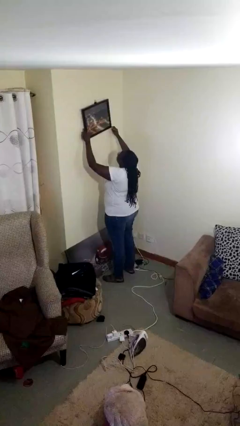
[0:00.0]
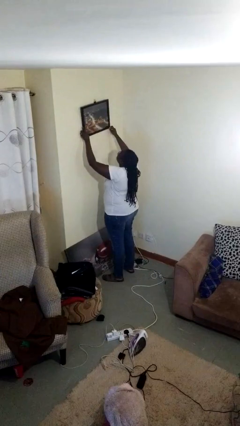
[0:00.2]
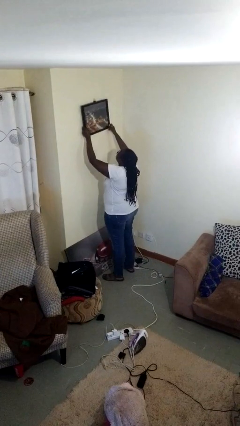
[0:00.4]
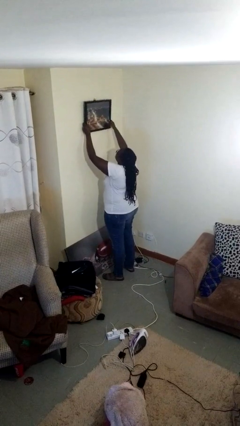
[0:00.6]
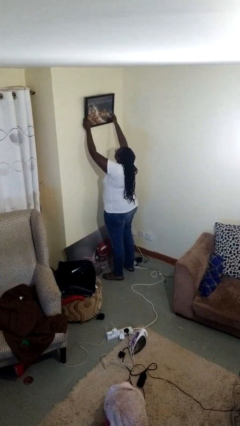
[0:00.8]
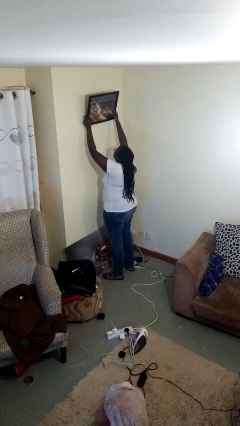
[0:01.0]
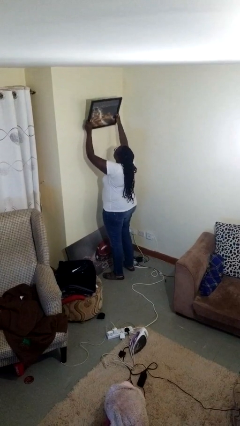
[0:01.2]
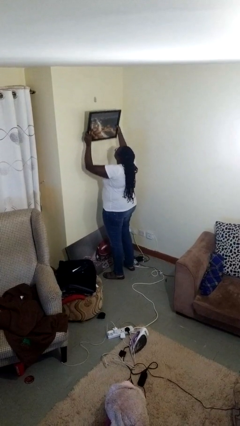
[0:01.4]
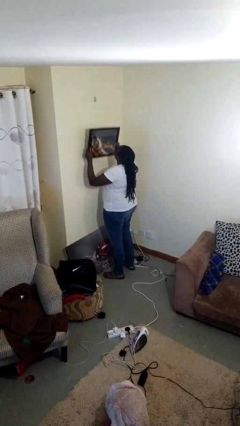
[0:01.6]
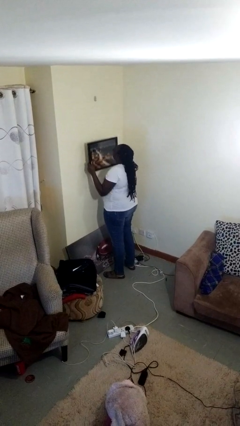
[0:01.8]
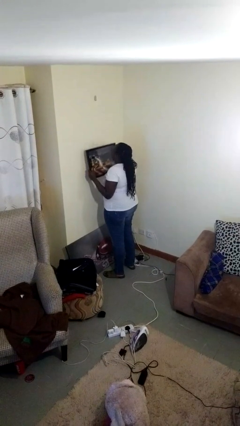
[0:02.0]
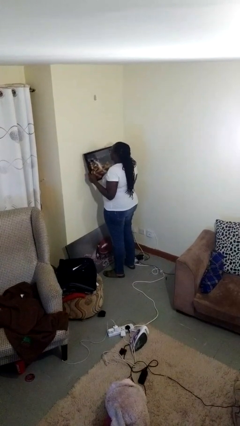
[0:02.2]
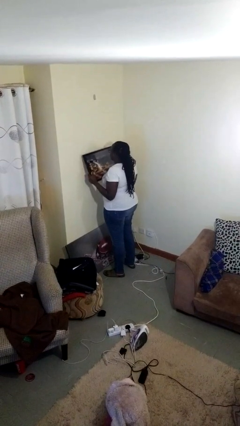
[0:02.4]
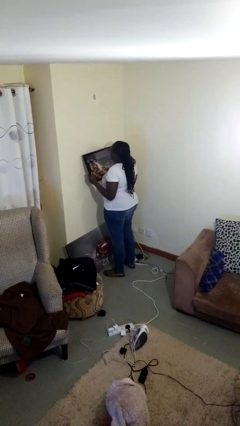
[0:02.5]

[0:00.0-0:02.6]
person takes down picture frame

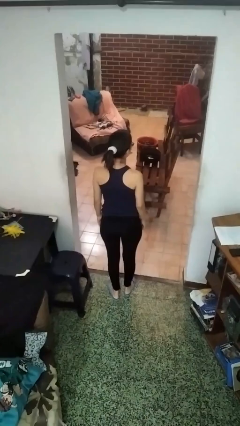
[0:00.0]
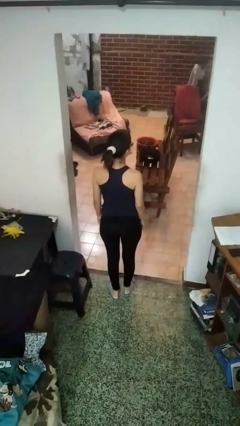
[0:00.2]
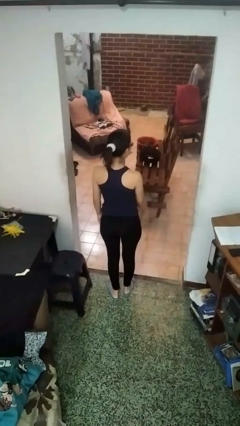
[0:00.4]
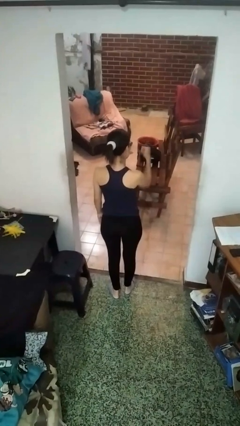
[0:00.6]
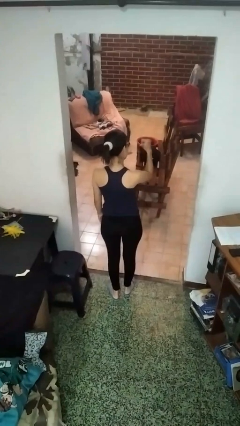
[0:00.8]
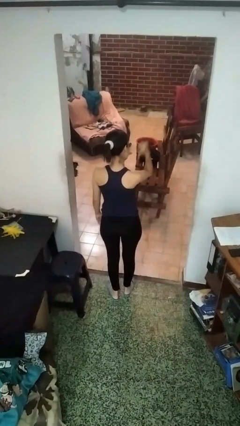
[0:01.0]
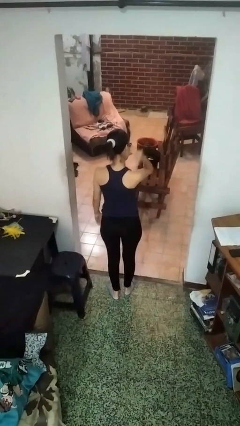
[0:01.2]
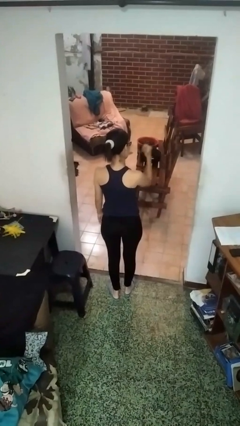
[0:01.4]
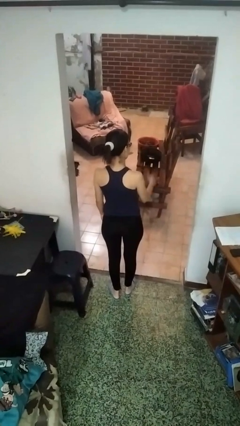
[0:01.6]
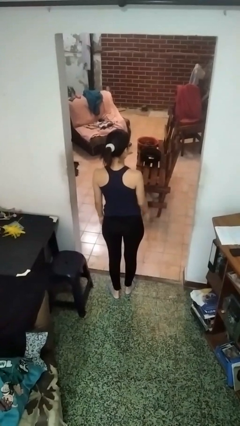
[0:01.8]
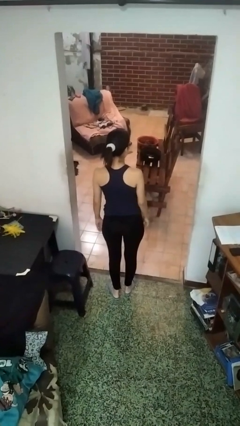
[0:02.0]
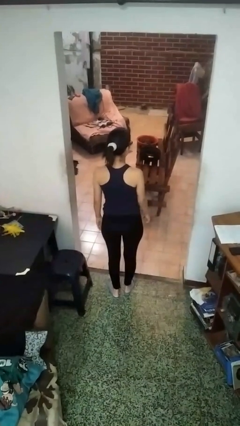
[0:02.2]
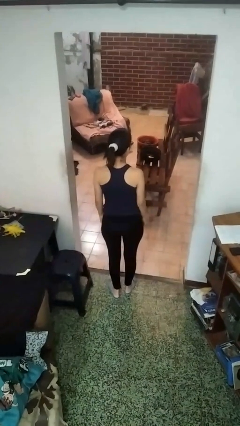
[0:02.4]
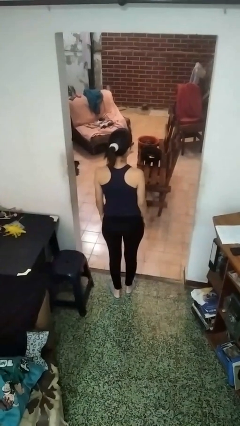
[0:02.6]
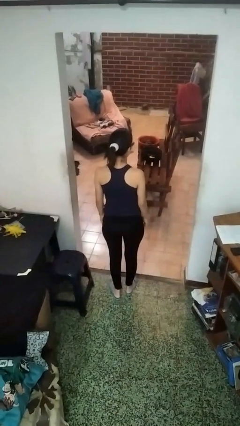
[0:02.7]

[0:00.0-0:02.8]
person gestures behind me

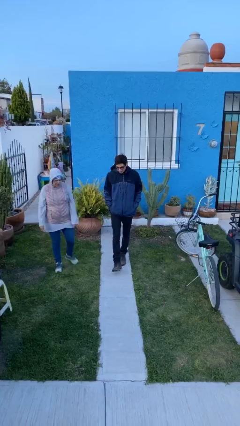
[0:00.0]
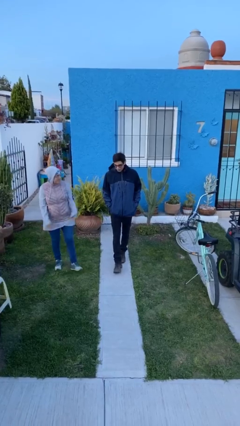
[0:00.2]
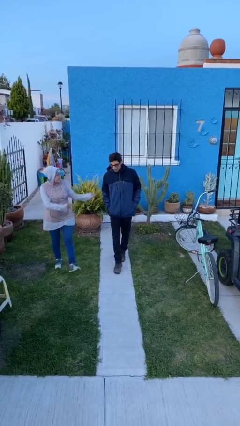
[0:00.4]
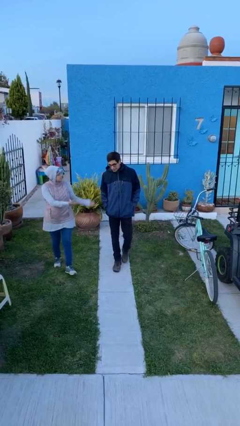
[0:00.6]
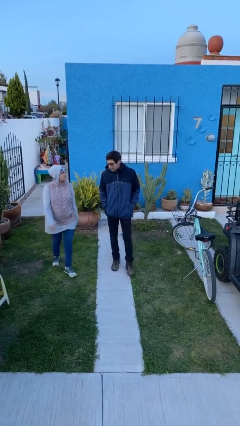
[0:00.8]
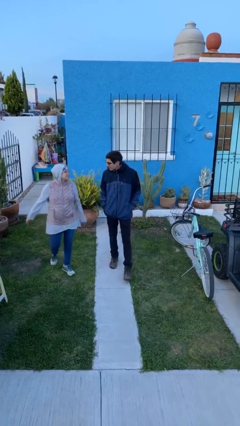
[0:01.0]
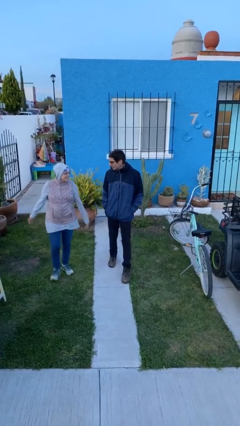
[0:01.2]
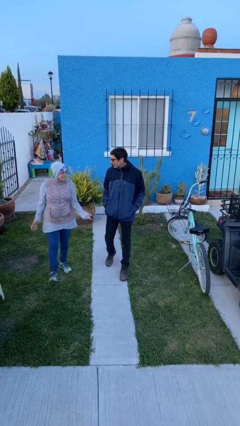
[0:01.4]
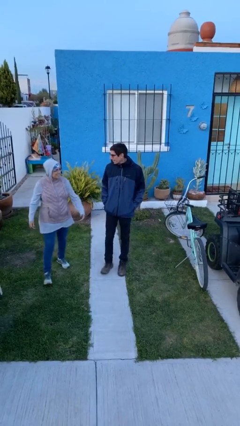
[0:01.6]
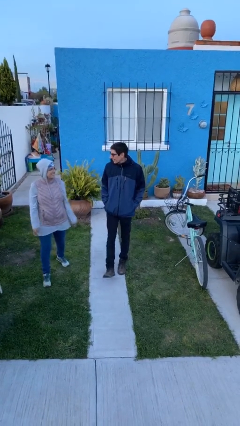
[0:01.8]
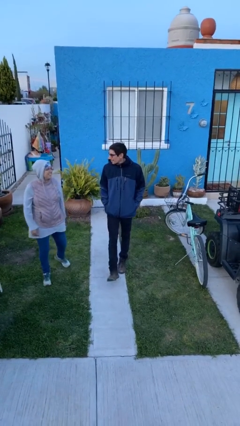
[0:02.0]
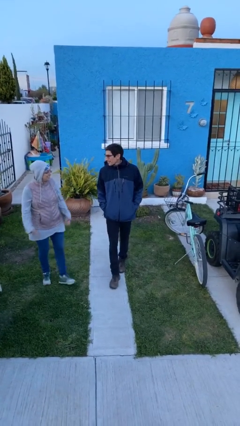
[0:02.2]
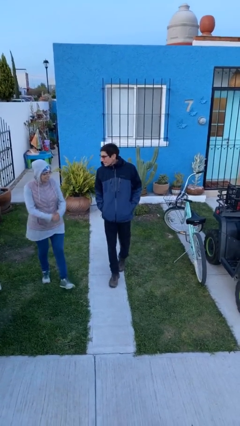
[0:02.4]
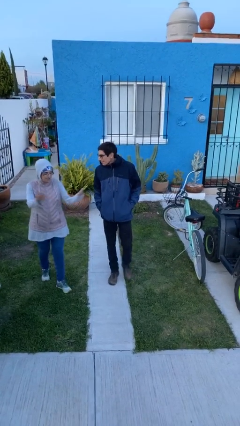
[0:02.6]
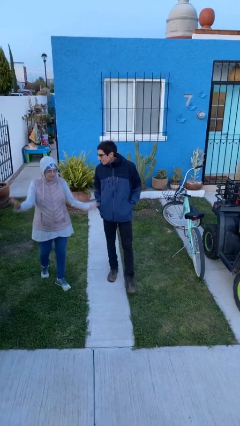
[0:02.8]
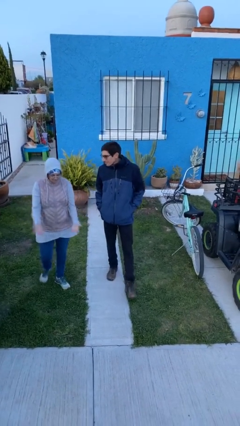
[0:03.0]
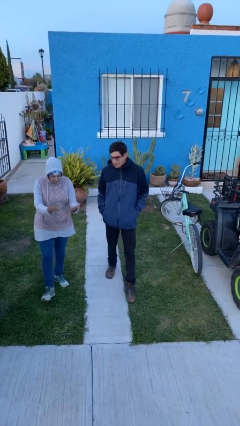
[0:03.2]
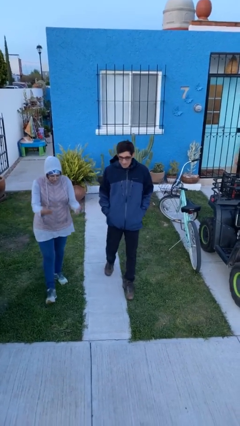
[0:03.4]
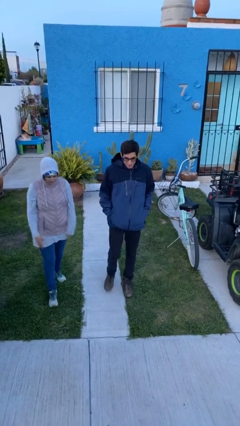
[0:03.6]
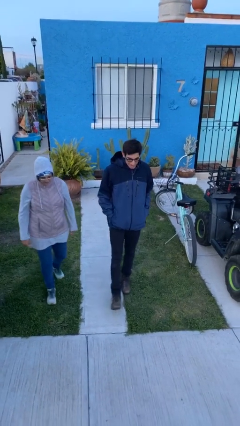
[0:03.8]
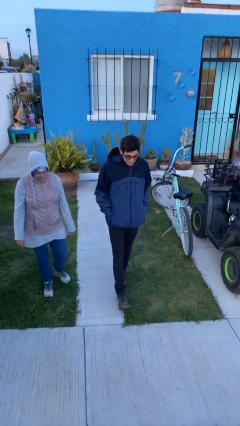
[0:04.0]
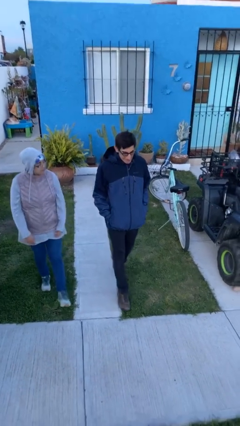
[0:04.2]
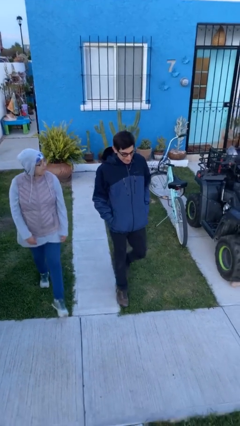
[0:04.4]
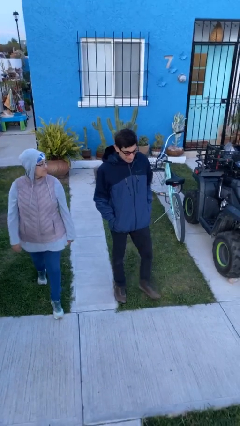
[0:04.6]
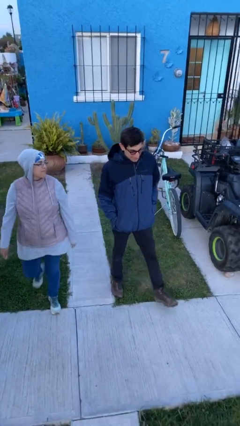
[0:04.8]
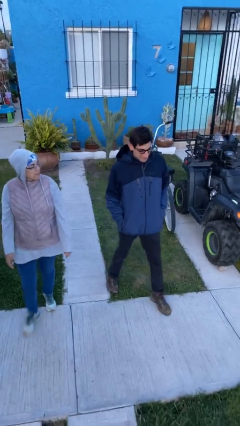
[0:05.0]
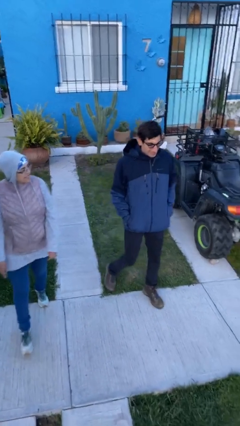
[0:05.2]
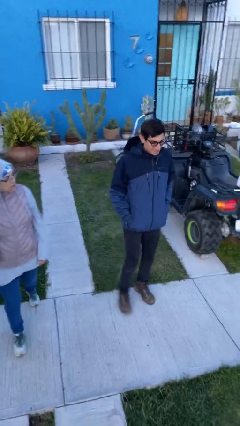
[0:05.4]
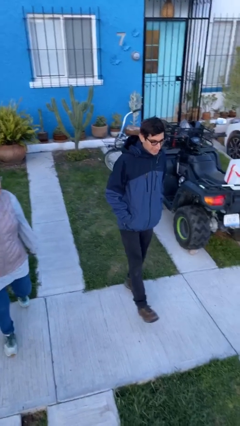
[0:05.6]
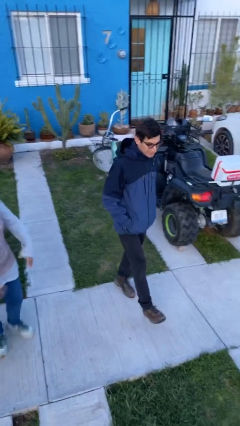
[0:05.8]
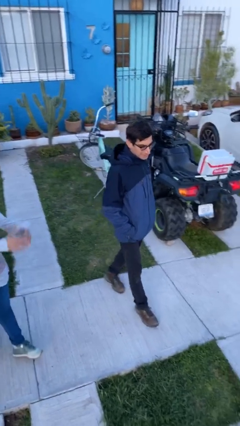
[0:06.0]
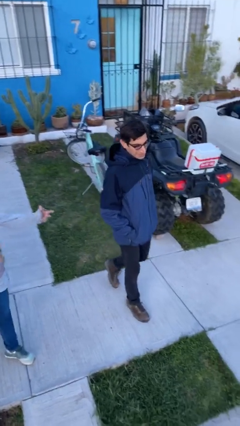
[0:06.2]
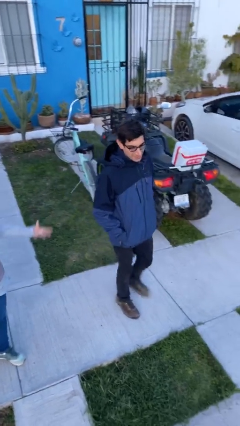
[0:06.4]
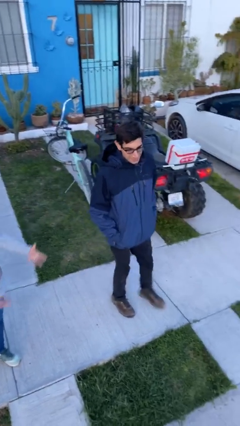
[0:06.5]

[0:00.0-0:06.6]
person talks to person

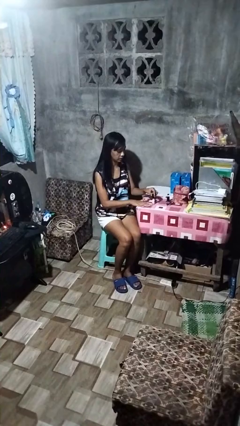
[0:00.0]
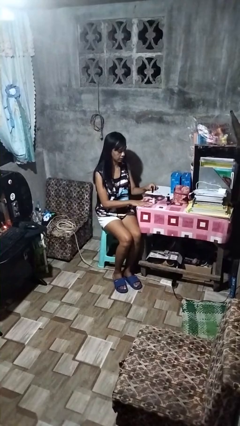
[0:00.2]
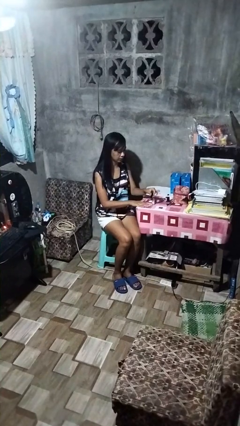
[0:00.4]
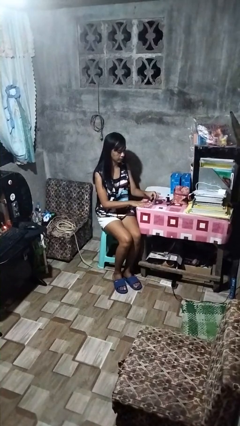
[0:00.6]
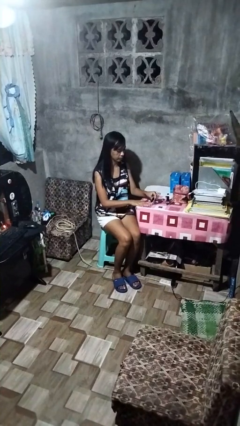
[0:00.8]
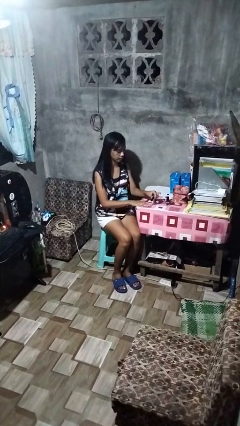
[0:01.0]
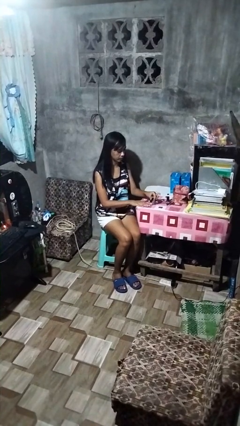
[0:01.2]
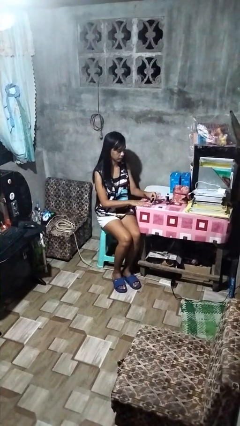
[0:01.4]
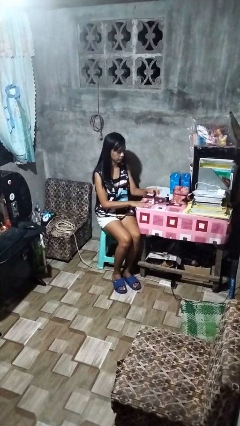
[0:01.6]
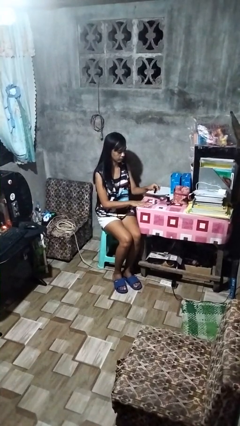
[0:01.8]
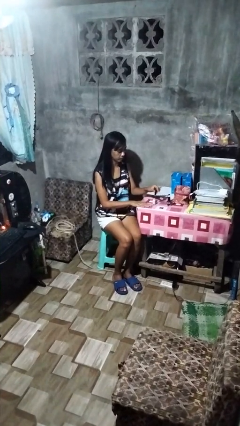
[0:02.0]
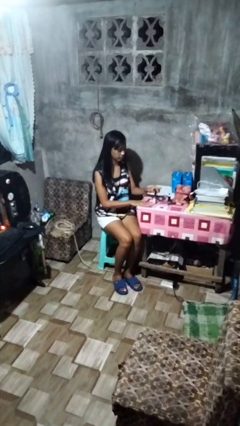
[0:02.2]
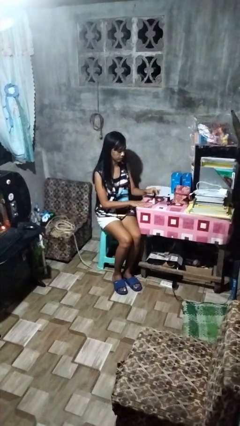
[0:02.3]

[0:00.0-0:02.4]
person paints fingernails

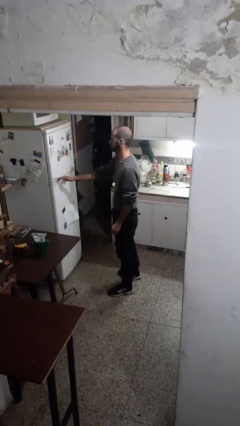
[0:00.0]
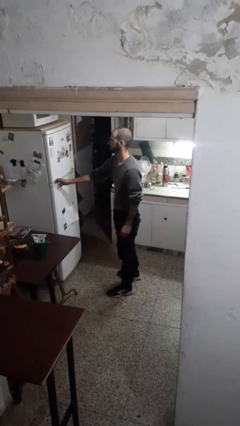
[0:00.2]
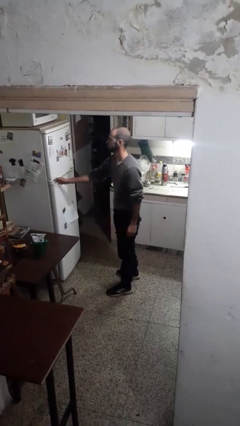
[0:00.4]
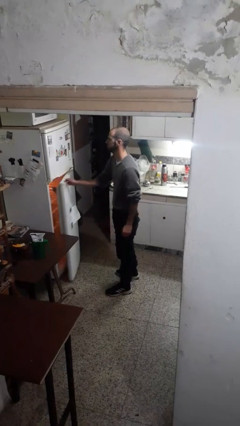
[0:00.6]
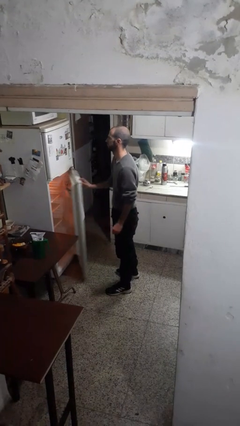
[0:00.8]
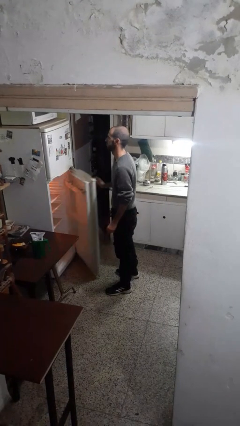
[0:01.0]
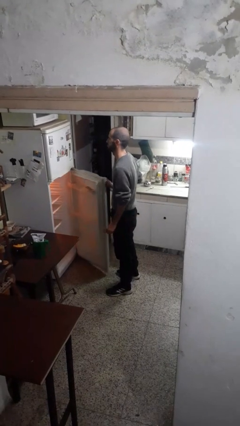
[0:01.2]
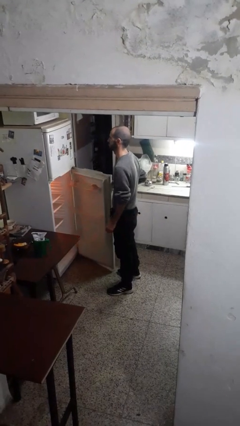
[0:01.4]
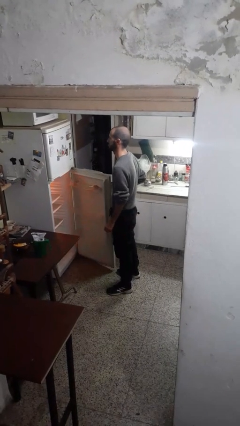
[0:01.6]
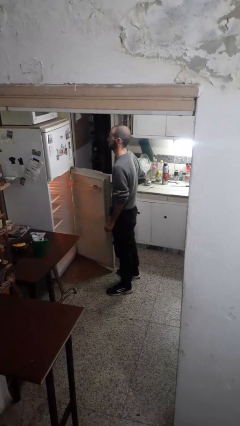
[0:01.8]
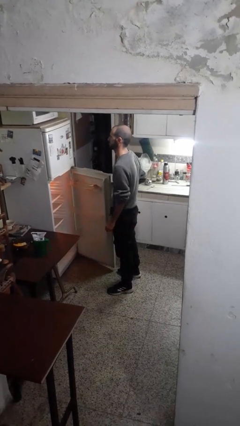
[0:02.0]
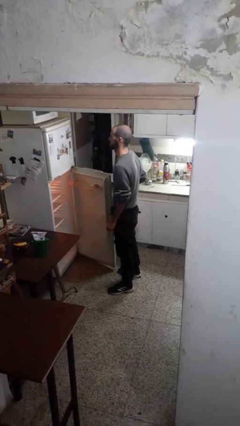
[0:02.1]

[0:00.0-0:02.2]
person opens refrigerator

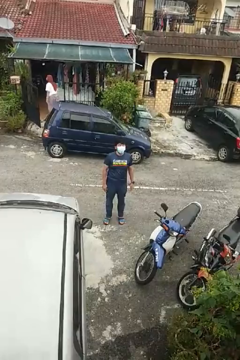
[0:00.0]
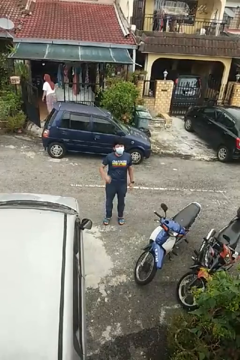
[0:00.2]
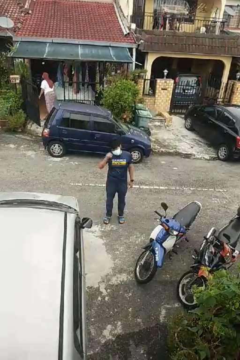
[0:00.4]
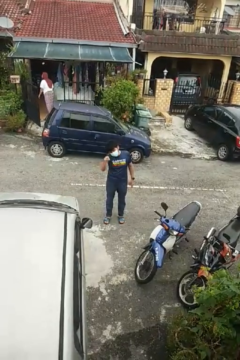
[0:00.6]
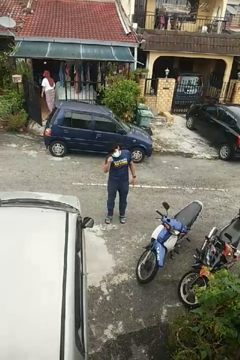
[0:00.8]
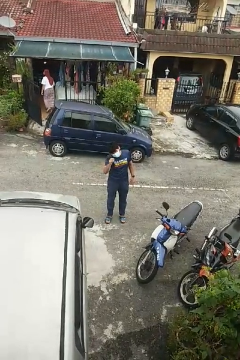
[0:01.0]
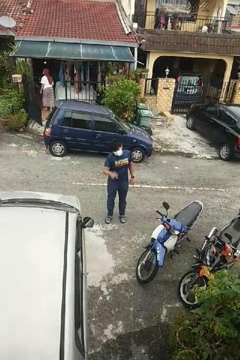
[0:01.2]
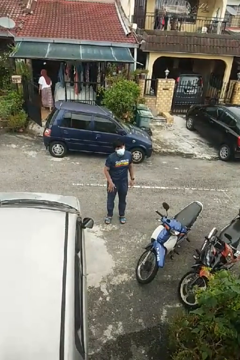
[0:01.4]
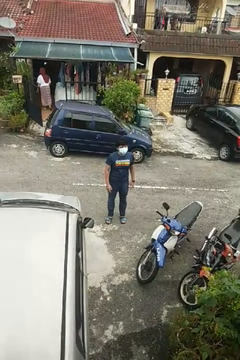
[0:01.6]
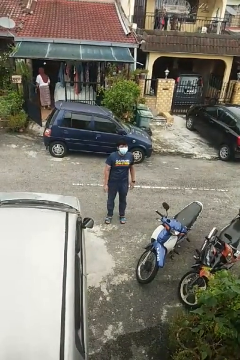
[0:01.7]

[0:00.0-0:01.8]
person points at person
